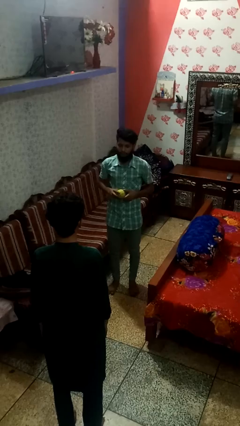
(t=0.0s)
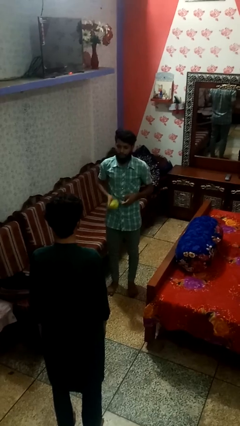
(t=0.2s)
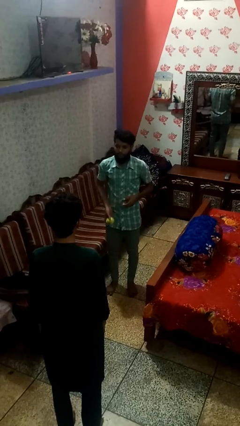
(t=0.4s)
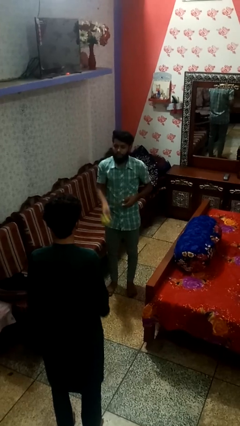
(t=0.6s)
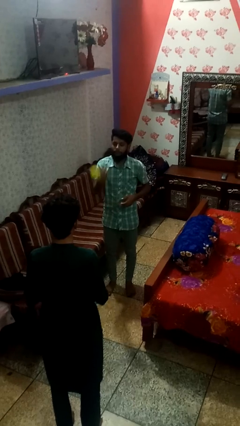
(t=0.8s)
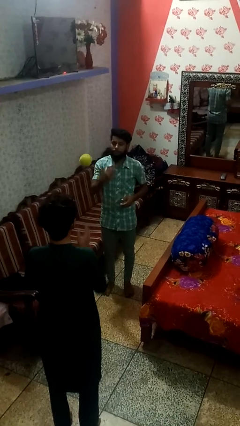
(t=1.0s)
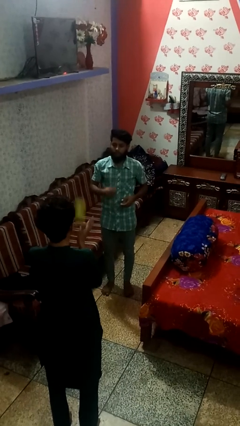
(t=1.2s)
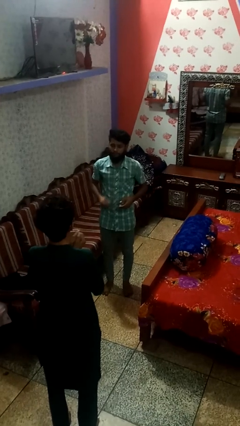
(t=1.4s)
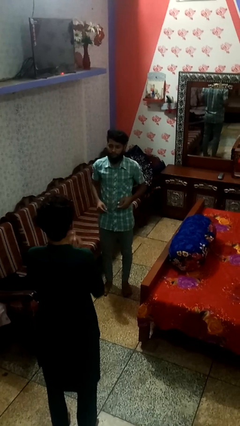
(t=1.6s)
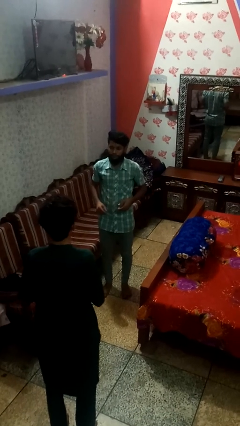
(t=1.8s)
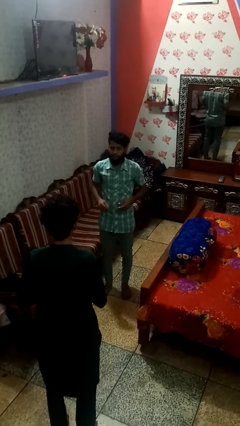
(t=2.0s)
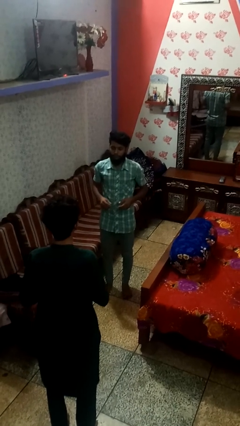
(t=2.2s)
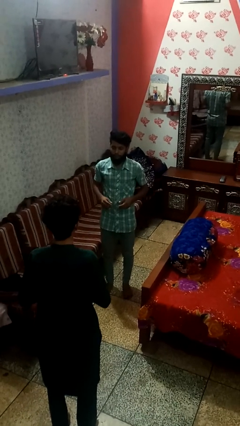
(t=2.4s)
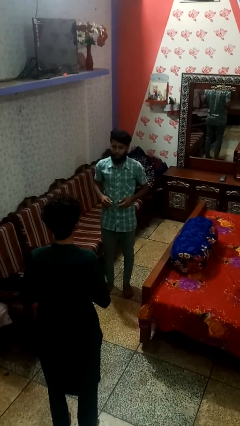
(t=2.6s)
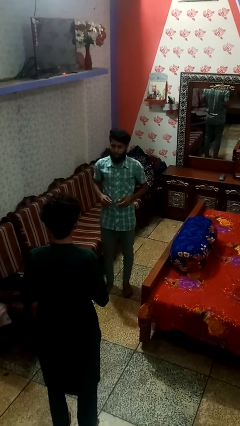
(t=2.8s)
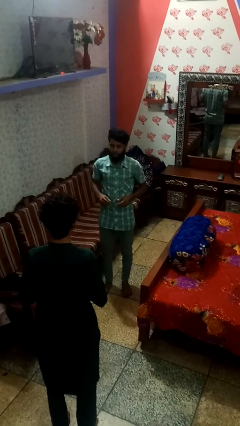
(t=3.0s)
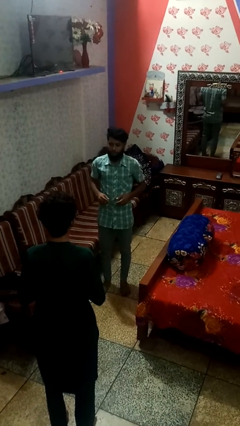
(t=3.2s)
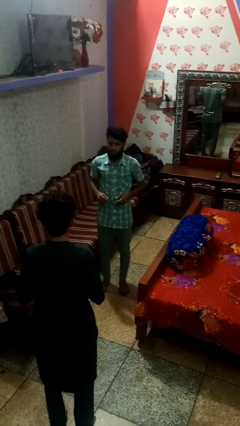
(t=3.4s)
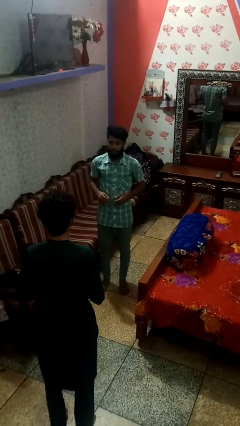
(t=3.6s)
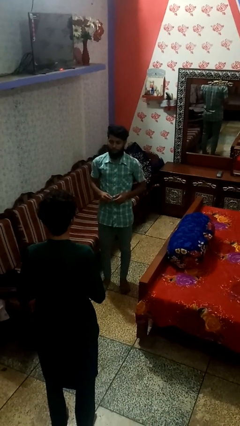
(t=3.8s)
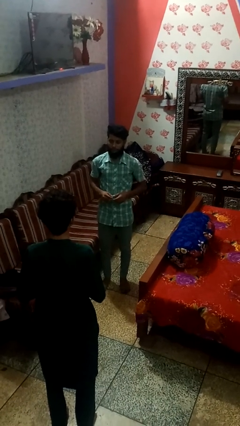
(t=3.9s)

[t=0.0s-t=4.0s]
person throws object to person

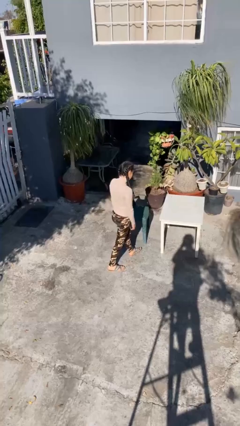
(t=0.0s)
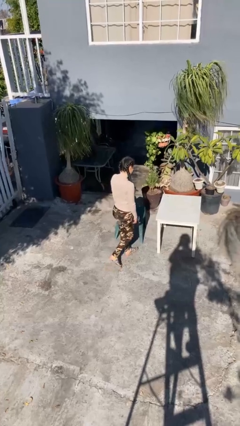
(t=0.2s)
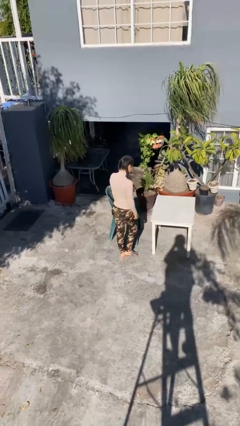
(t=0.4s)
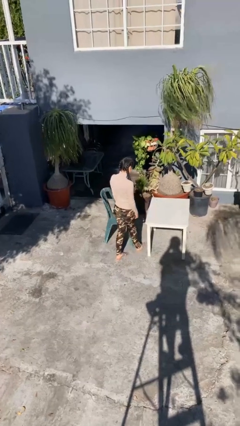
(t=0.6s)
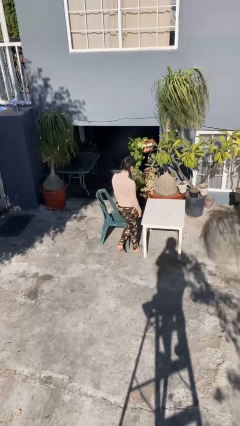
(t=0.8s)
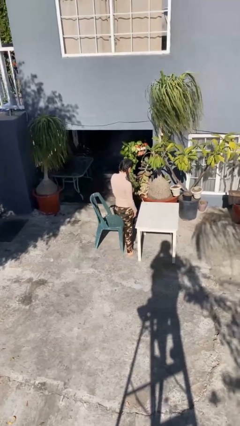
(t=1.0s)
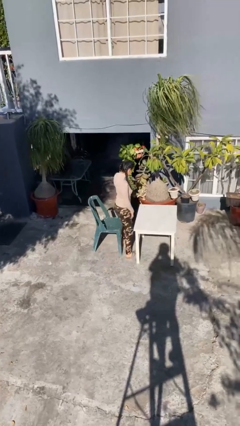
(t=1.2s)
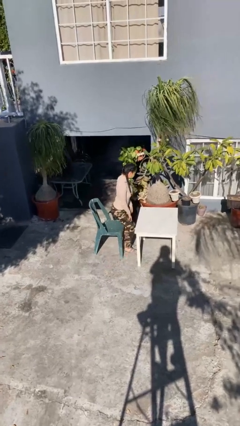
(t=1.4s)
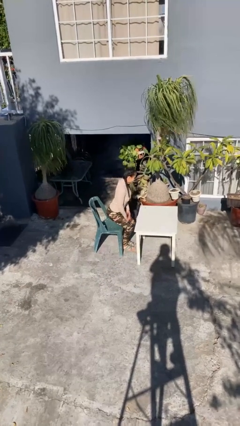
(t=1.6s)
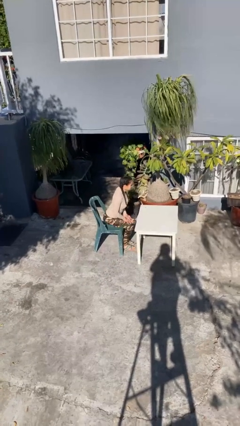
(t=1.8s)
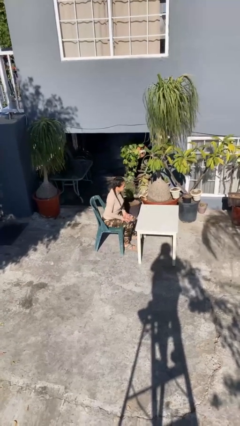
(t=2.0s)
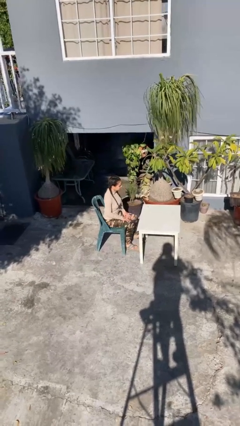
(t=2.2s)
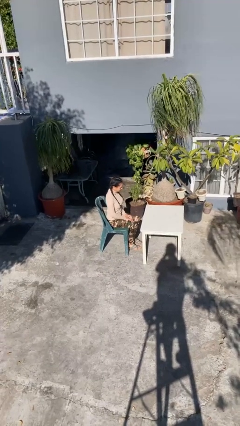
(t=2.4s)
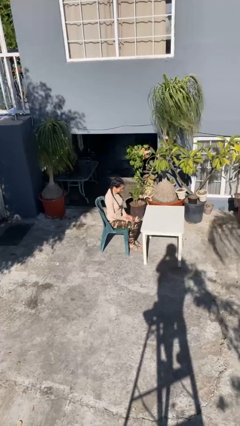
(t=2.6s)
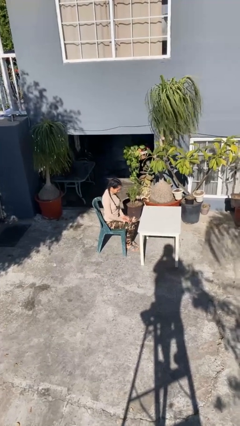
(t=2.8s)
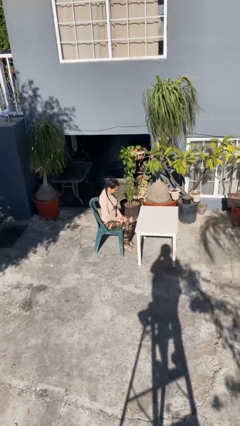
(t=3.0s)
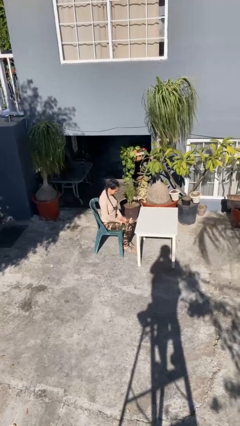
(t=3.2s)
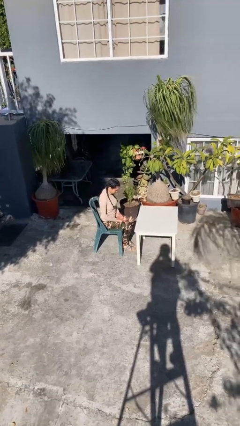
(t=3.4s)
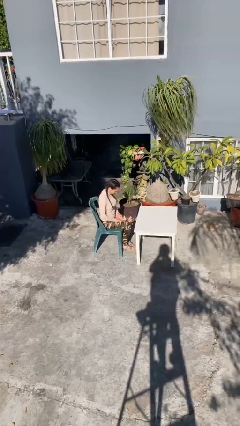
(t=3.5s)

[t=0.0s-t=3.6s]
person sits down

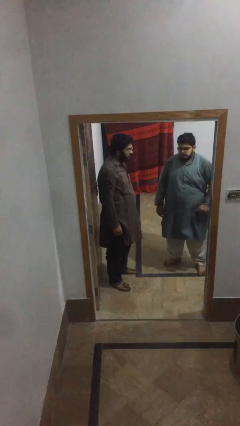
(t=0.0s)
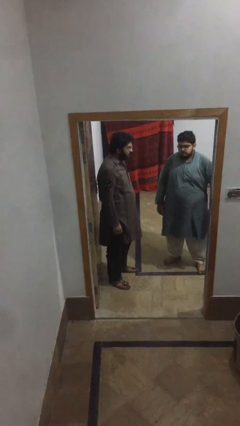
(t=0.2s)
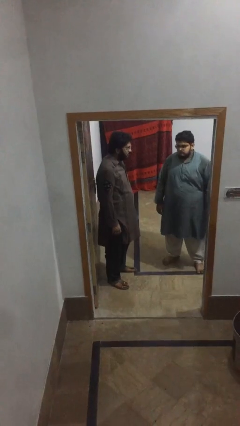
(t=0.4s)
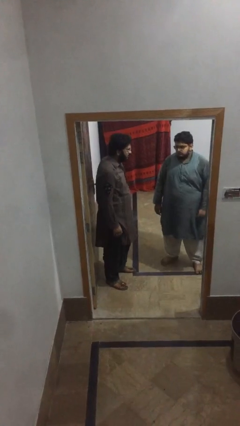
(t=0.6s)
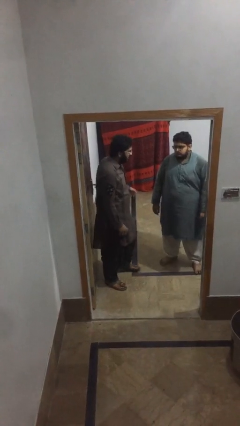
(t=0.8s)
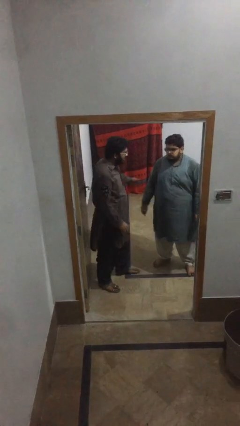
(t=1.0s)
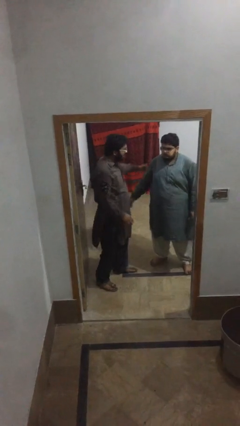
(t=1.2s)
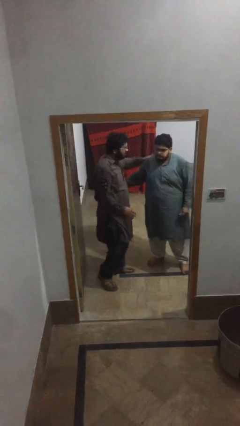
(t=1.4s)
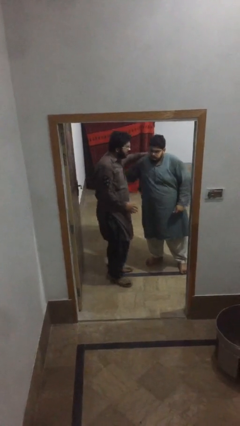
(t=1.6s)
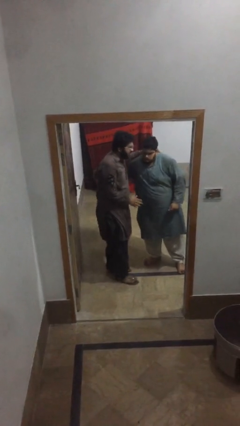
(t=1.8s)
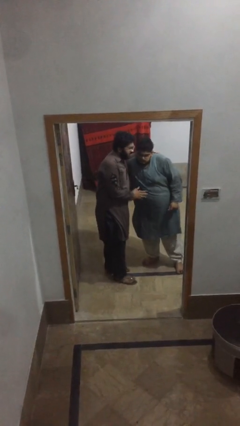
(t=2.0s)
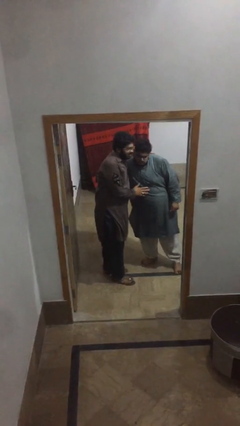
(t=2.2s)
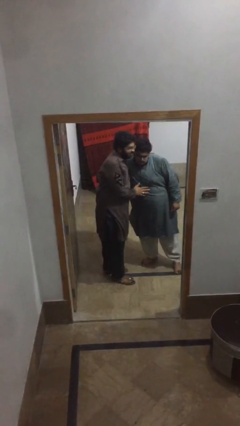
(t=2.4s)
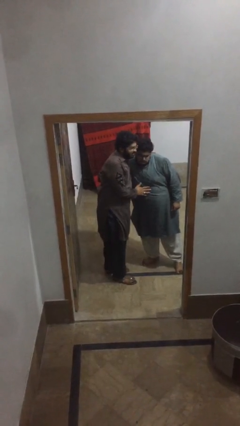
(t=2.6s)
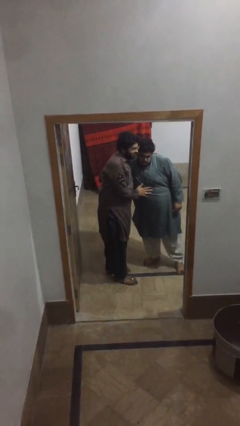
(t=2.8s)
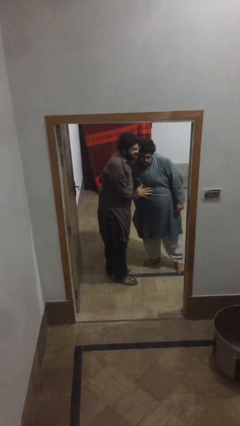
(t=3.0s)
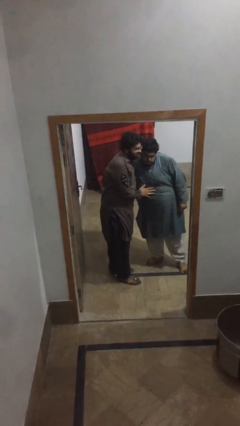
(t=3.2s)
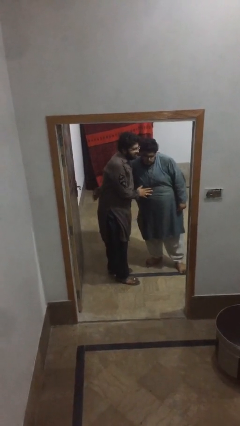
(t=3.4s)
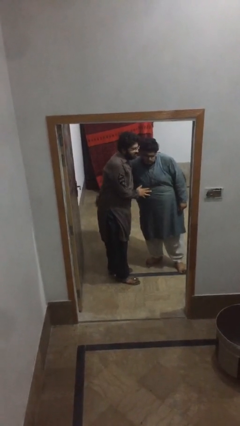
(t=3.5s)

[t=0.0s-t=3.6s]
person embraces person

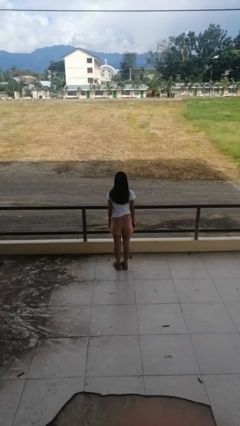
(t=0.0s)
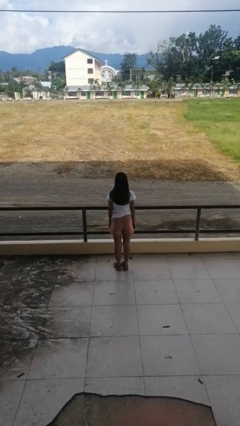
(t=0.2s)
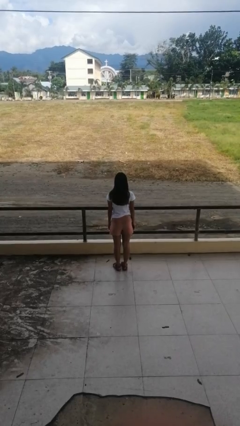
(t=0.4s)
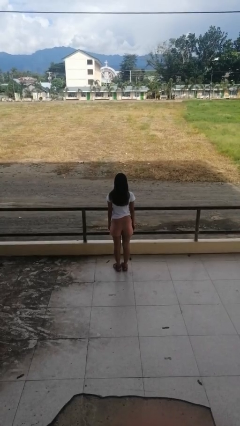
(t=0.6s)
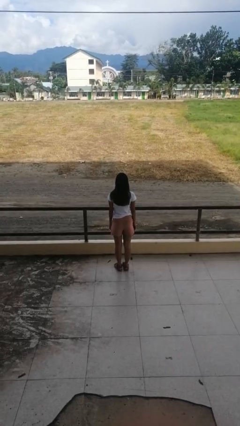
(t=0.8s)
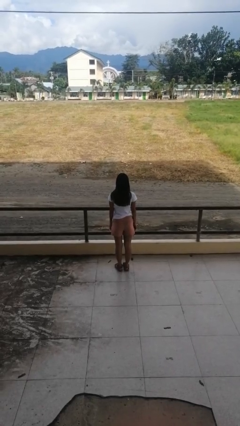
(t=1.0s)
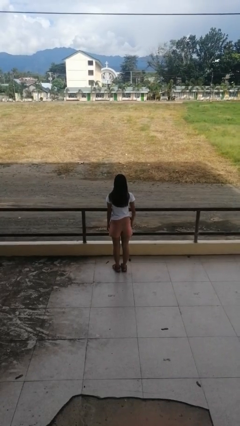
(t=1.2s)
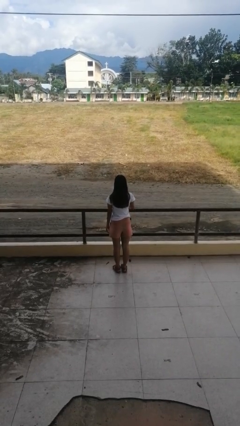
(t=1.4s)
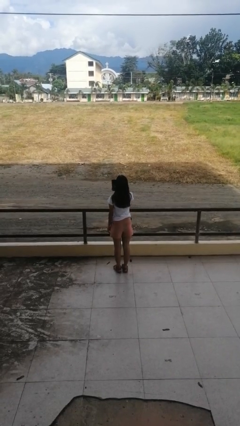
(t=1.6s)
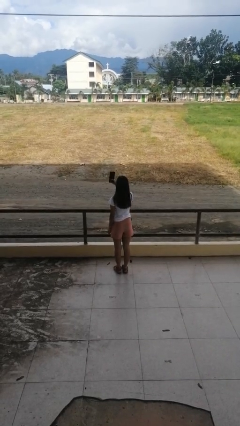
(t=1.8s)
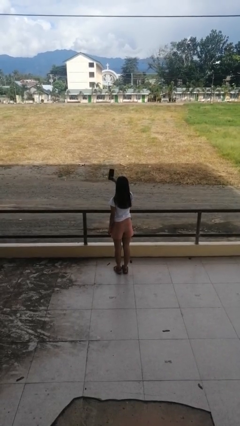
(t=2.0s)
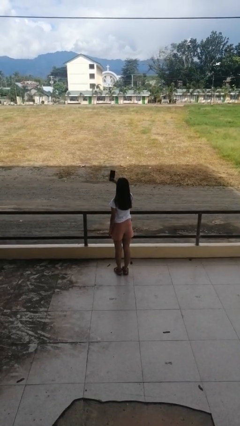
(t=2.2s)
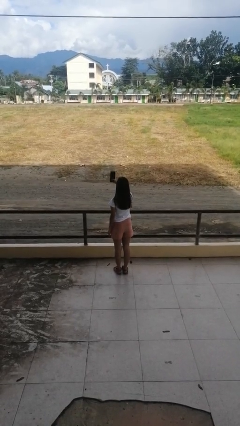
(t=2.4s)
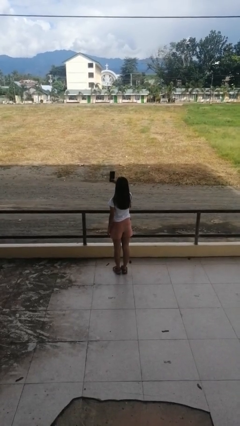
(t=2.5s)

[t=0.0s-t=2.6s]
person takes selfie

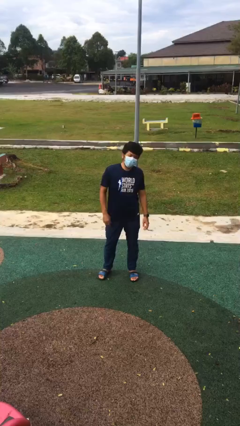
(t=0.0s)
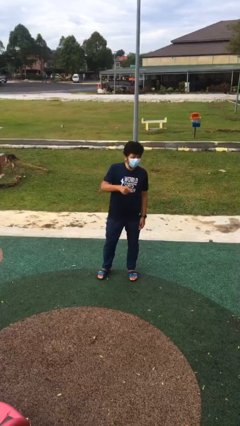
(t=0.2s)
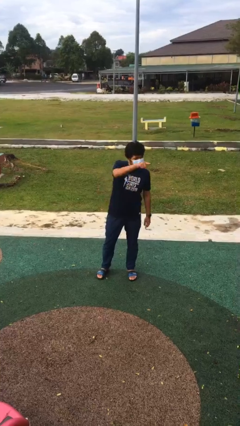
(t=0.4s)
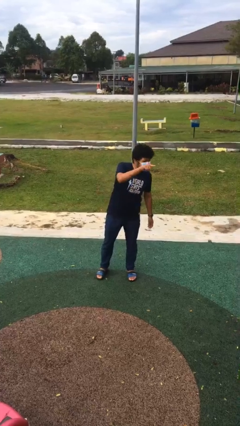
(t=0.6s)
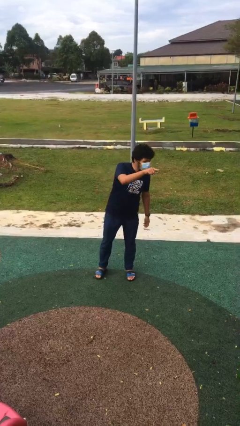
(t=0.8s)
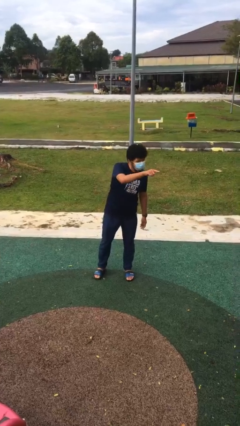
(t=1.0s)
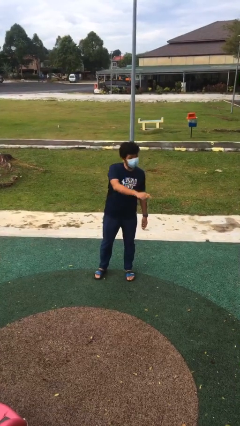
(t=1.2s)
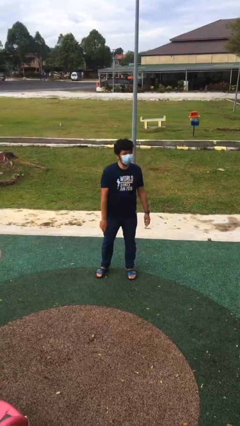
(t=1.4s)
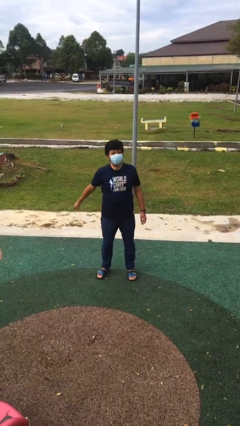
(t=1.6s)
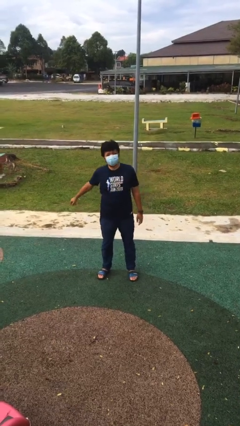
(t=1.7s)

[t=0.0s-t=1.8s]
person points at person

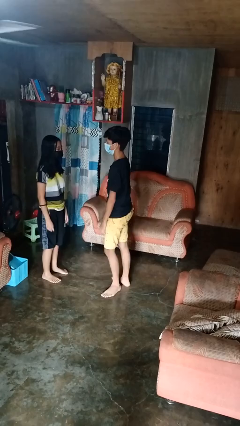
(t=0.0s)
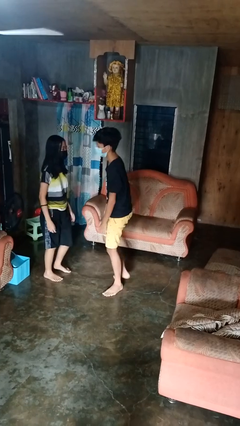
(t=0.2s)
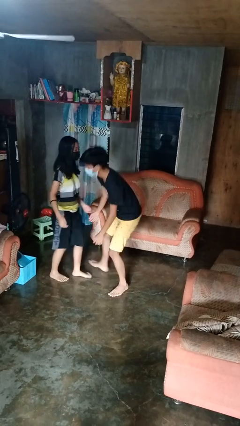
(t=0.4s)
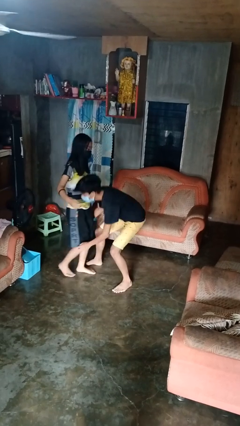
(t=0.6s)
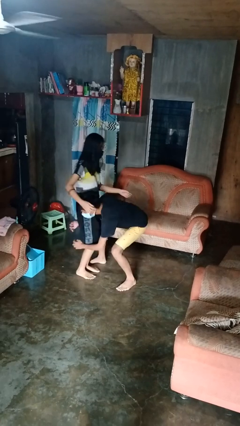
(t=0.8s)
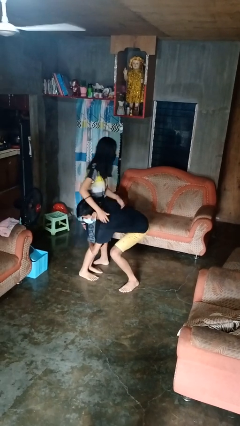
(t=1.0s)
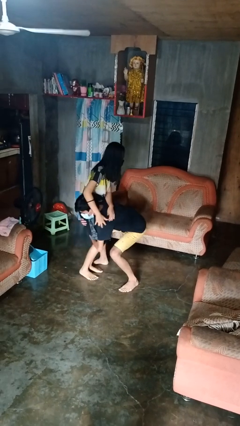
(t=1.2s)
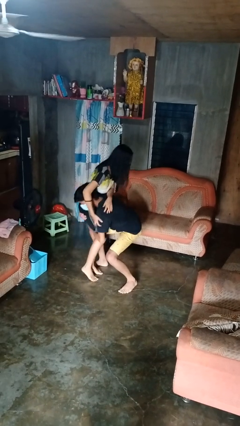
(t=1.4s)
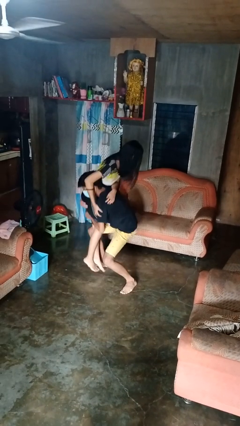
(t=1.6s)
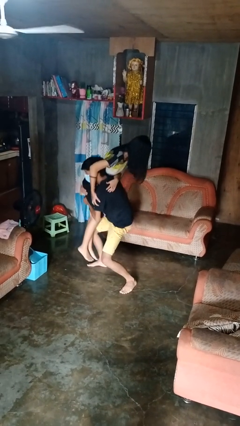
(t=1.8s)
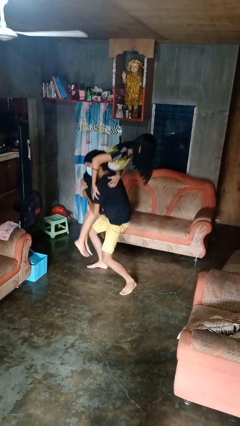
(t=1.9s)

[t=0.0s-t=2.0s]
person carries person over shoulder
